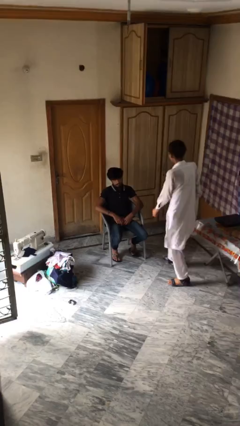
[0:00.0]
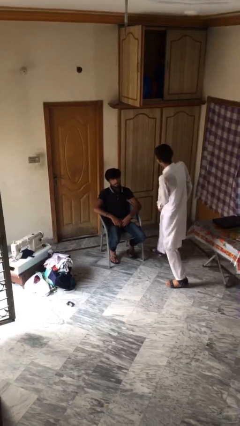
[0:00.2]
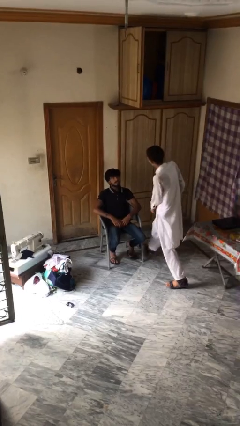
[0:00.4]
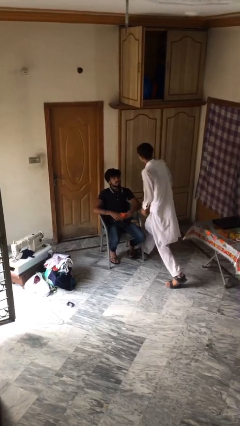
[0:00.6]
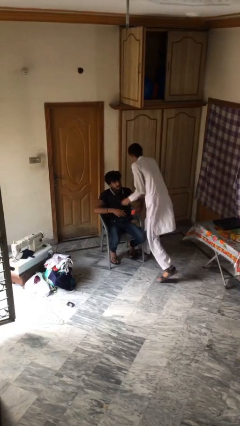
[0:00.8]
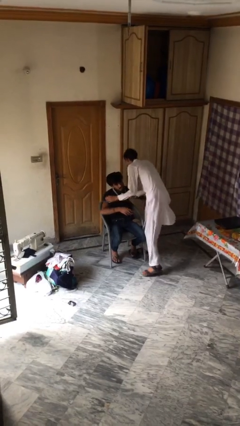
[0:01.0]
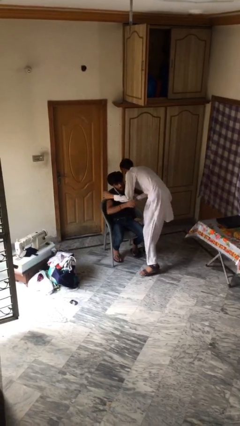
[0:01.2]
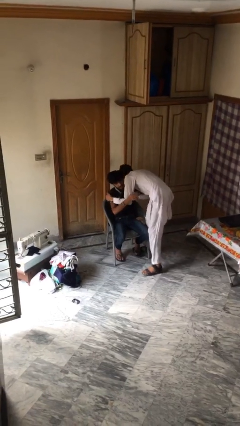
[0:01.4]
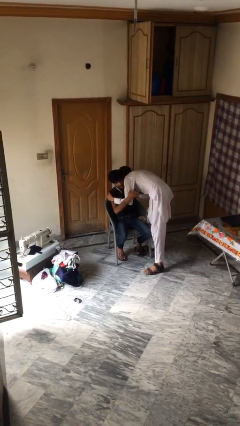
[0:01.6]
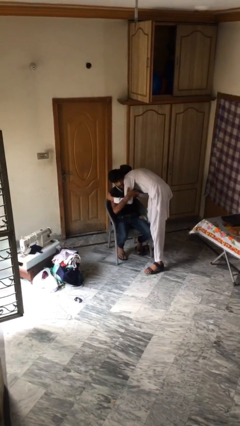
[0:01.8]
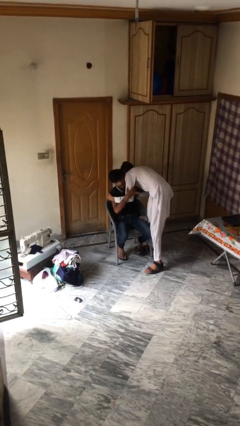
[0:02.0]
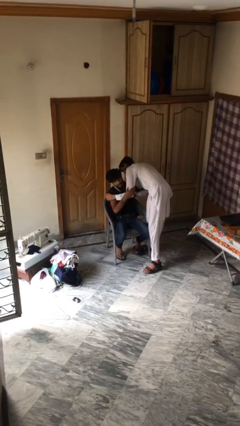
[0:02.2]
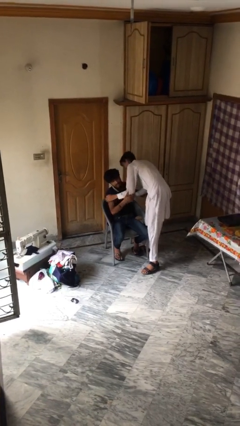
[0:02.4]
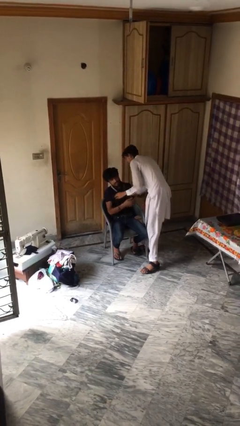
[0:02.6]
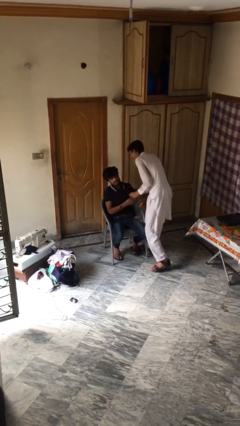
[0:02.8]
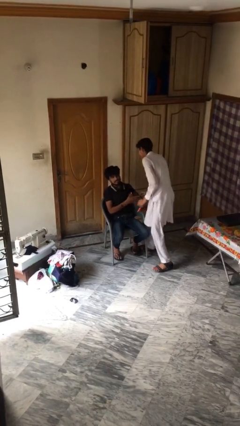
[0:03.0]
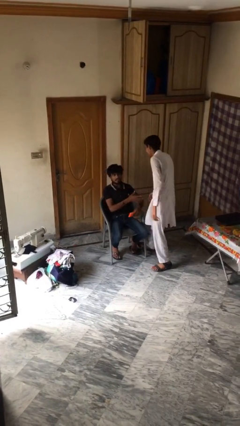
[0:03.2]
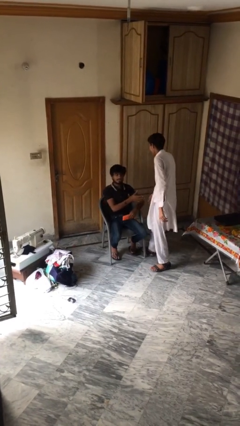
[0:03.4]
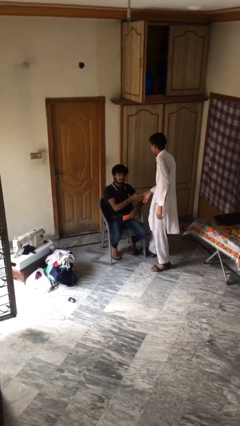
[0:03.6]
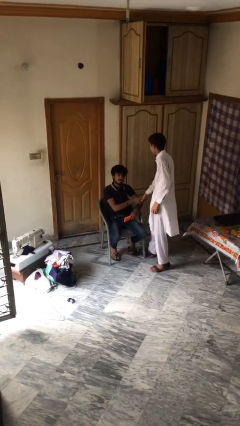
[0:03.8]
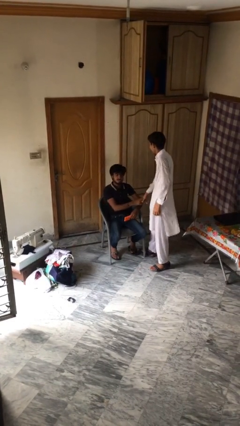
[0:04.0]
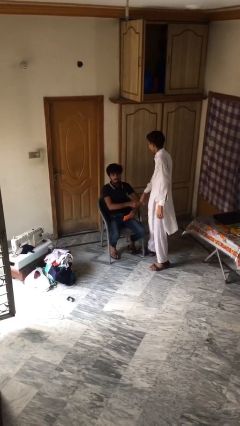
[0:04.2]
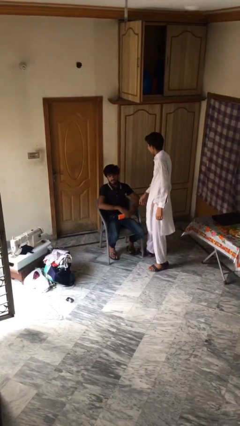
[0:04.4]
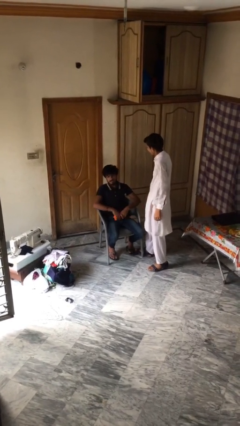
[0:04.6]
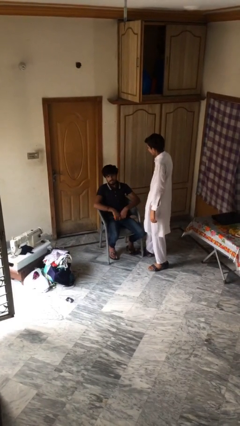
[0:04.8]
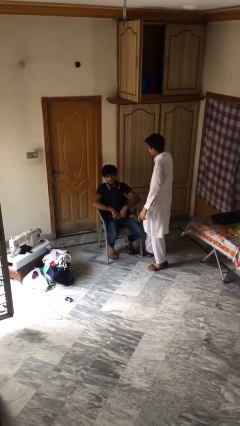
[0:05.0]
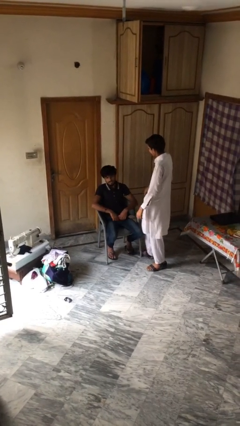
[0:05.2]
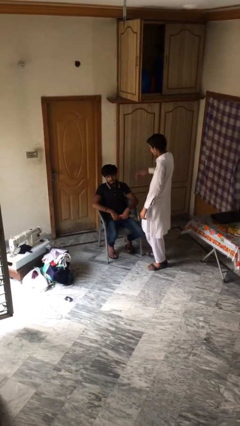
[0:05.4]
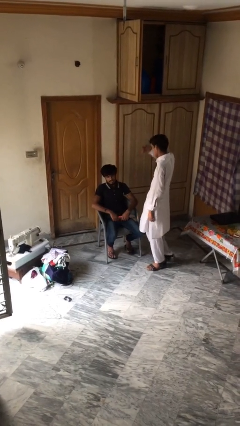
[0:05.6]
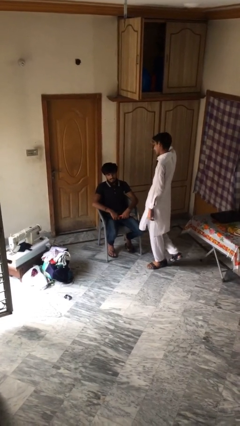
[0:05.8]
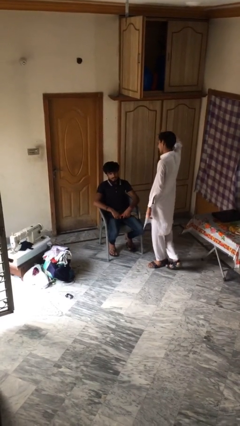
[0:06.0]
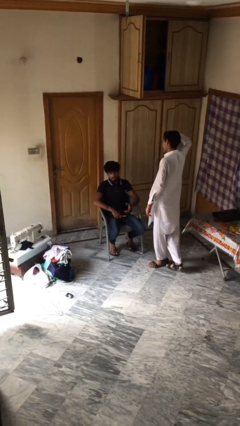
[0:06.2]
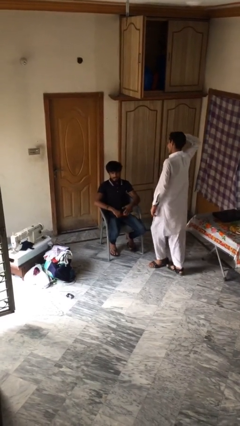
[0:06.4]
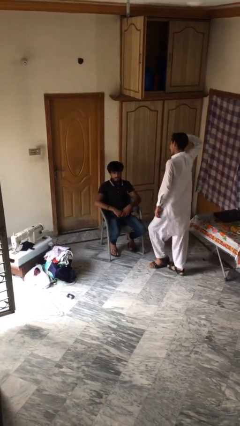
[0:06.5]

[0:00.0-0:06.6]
person embraces person

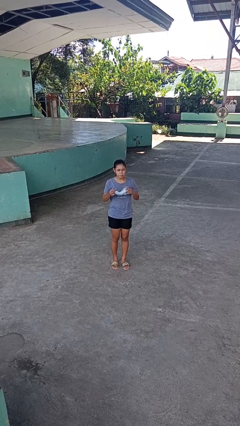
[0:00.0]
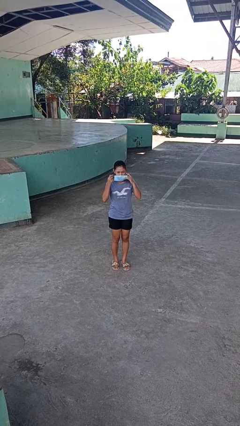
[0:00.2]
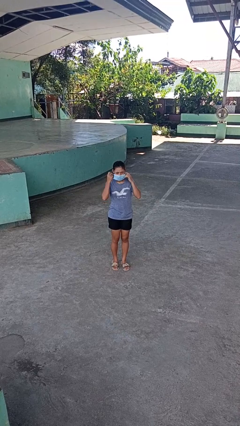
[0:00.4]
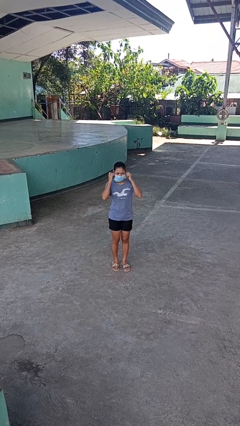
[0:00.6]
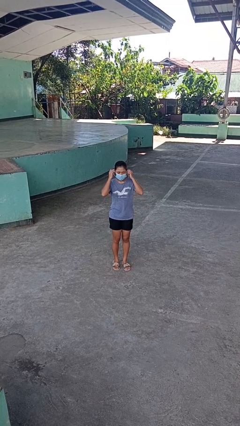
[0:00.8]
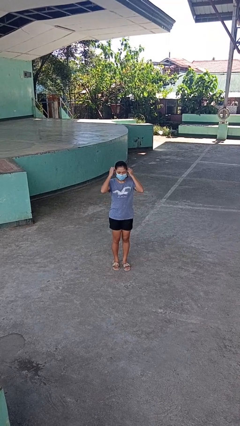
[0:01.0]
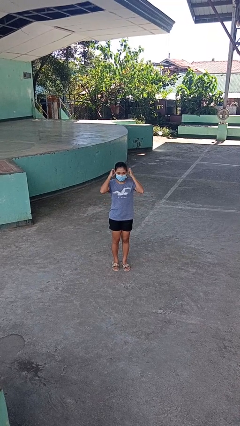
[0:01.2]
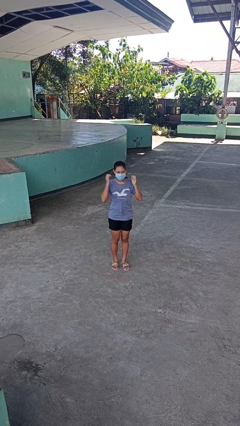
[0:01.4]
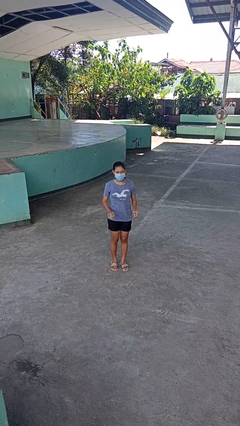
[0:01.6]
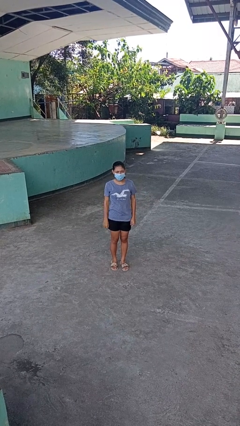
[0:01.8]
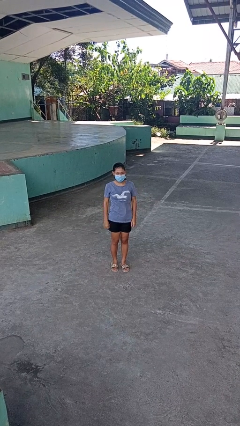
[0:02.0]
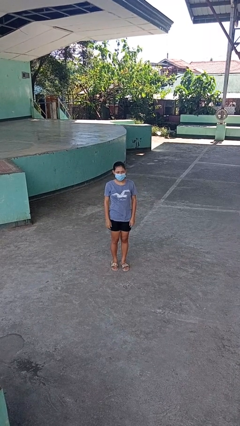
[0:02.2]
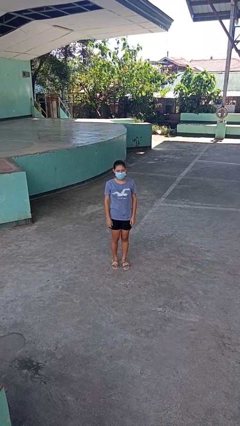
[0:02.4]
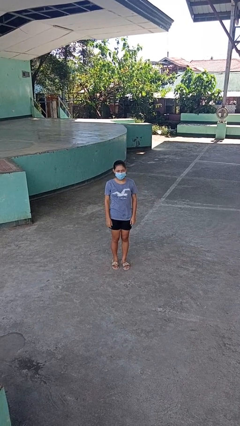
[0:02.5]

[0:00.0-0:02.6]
person puts on facemask

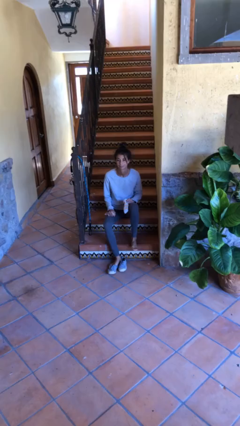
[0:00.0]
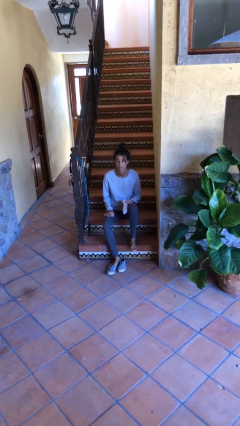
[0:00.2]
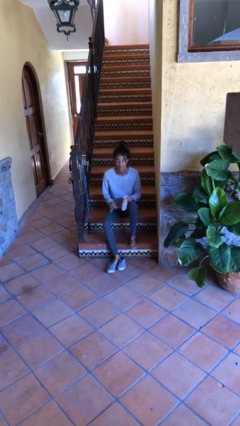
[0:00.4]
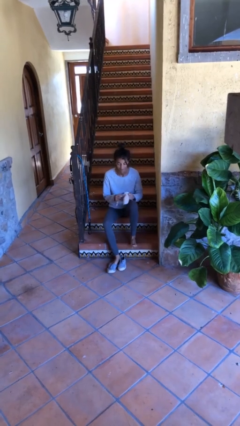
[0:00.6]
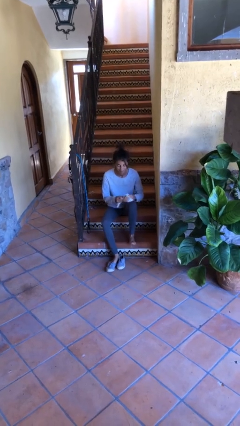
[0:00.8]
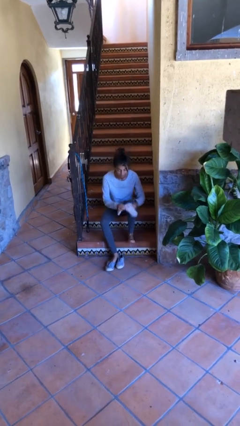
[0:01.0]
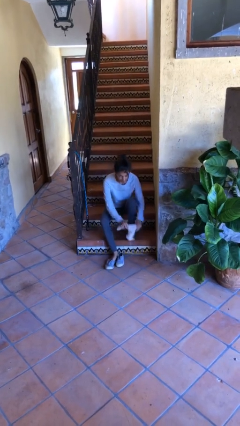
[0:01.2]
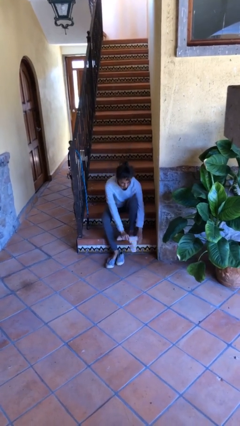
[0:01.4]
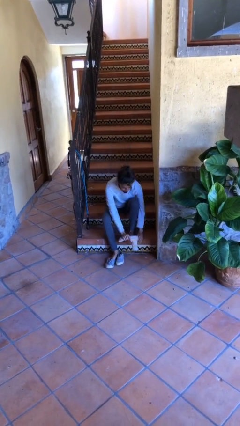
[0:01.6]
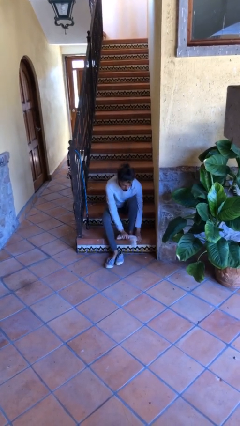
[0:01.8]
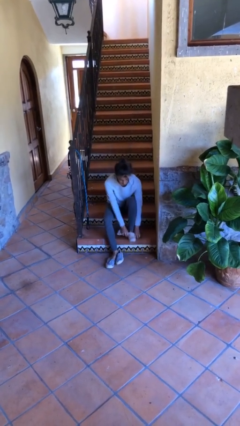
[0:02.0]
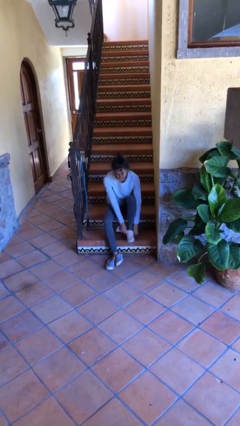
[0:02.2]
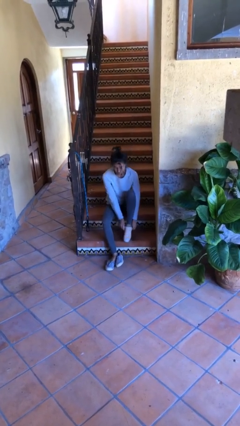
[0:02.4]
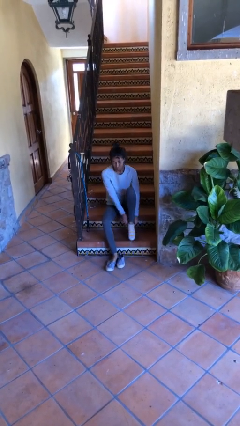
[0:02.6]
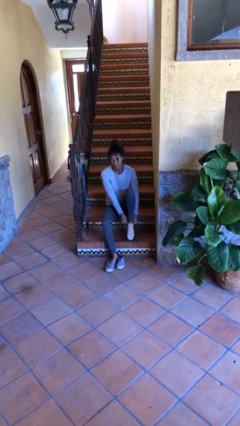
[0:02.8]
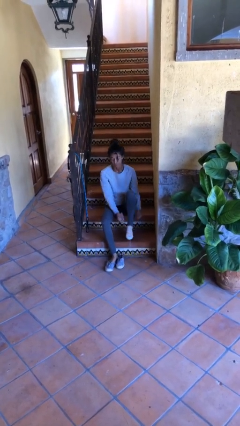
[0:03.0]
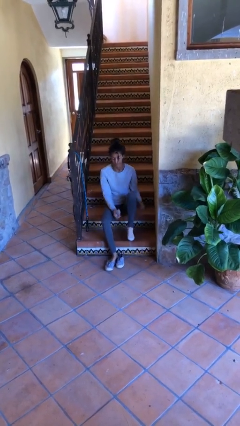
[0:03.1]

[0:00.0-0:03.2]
person puts on socks

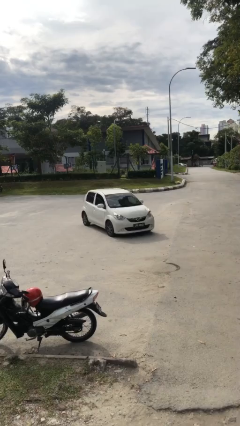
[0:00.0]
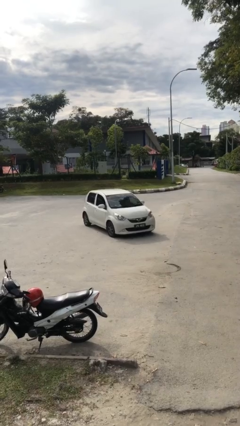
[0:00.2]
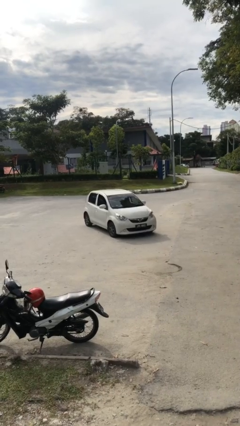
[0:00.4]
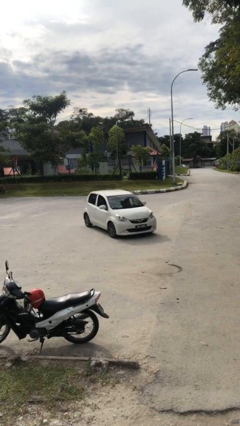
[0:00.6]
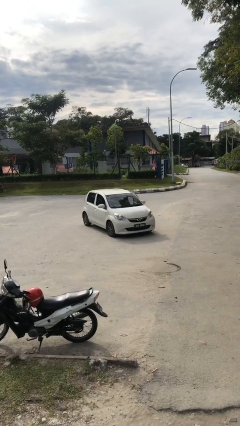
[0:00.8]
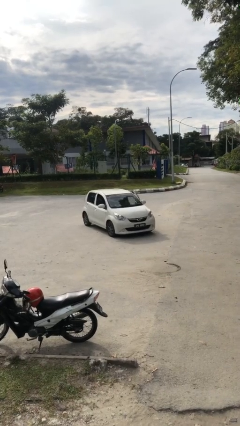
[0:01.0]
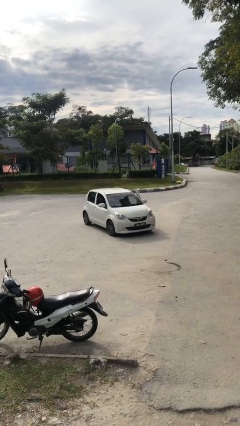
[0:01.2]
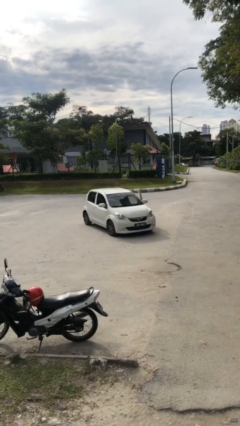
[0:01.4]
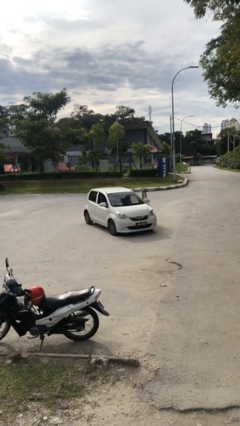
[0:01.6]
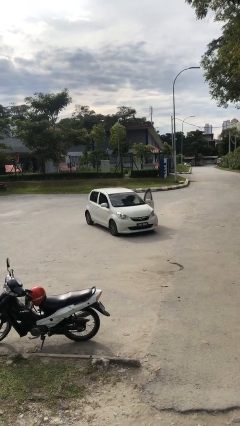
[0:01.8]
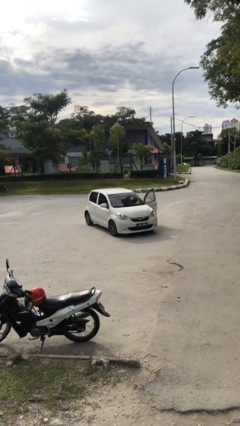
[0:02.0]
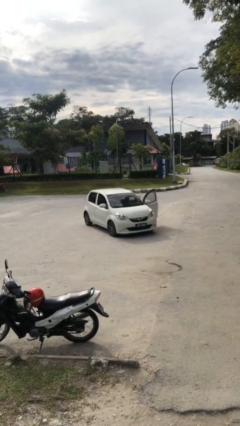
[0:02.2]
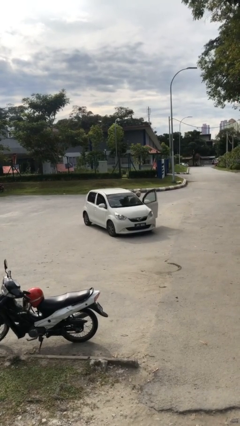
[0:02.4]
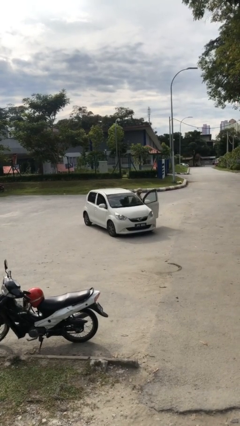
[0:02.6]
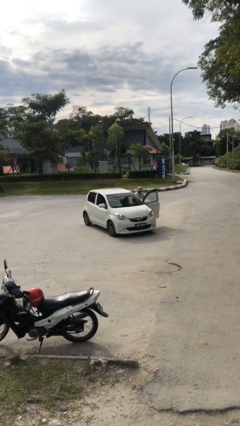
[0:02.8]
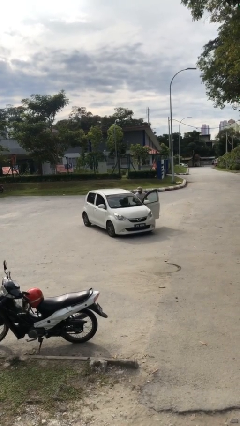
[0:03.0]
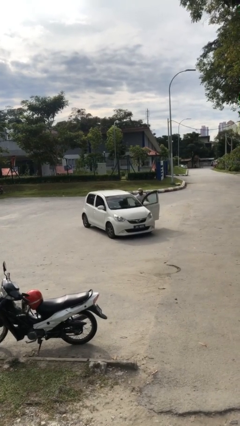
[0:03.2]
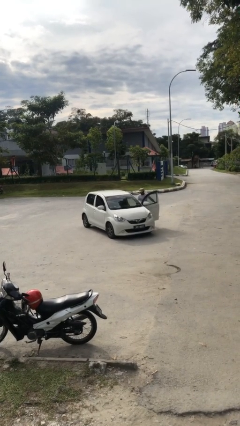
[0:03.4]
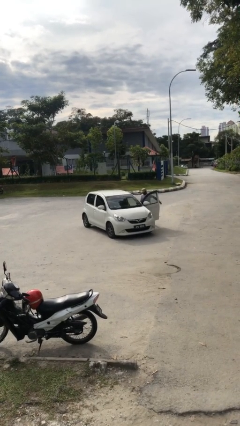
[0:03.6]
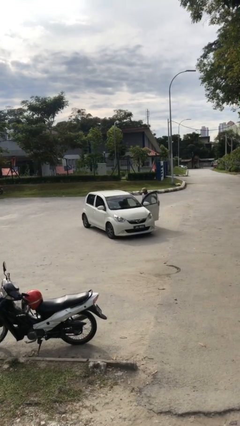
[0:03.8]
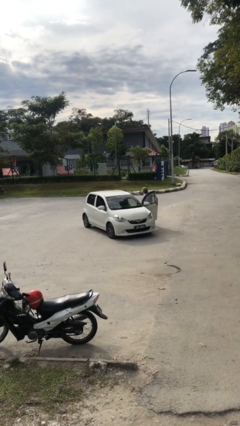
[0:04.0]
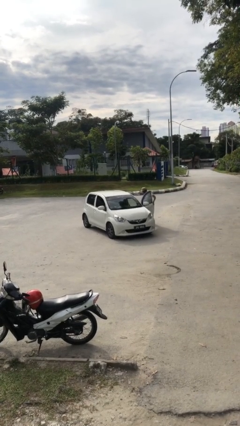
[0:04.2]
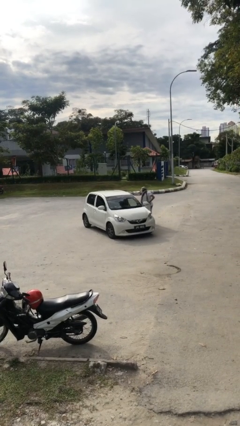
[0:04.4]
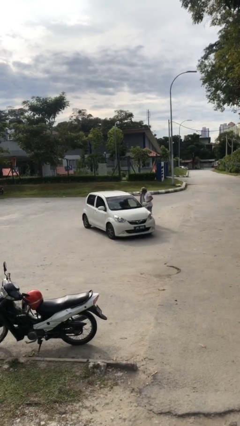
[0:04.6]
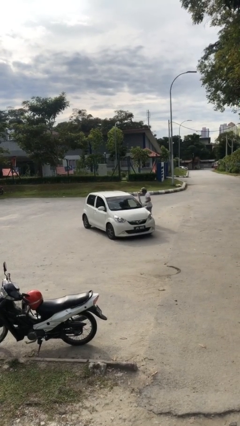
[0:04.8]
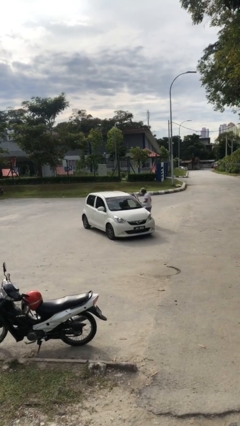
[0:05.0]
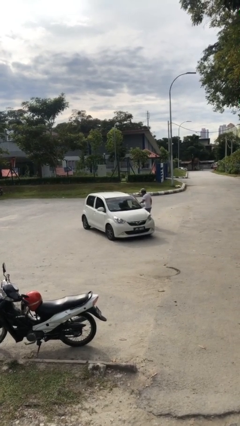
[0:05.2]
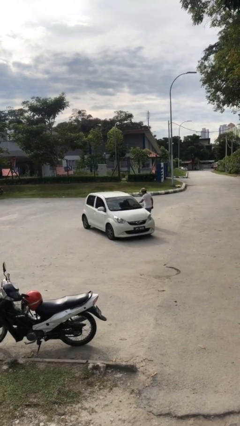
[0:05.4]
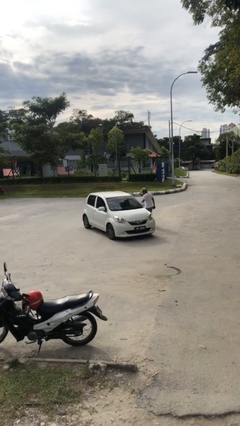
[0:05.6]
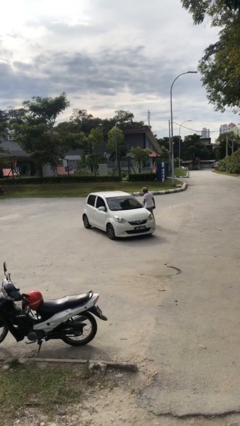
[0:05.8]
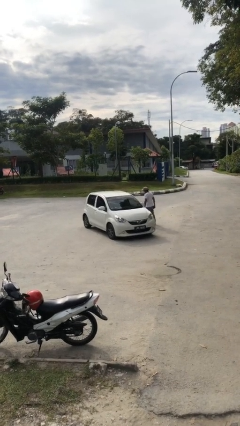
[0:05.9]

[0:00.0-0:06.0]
car drops off person
